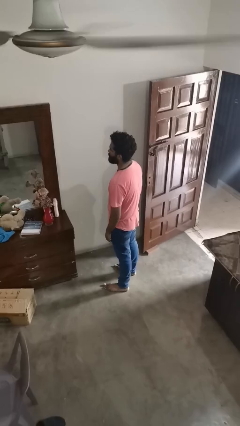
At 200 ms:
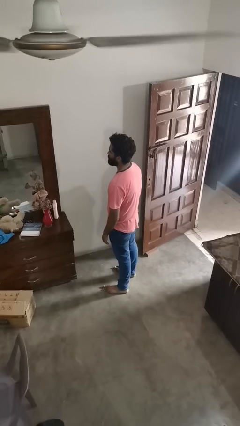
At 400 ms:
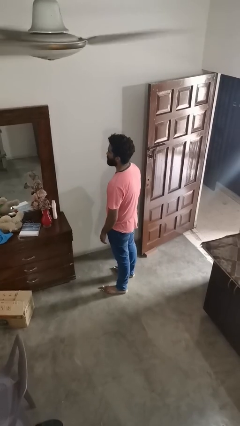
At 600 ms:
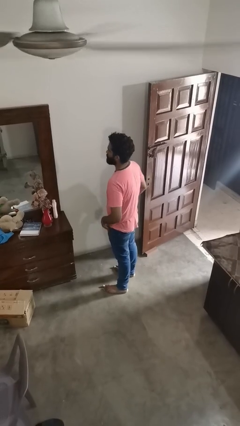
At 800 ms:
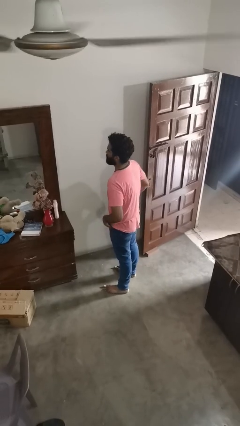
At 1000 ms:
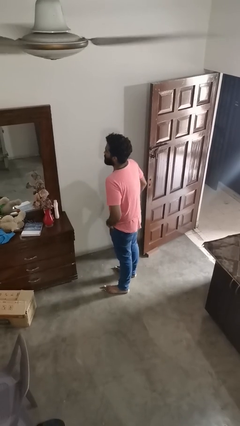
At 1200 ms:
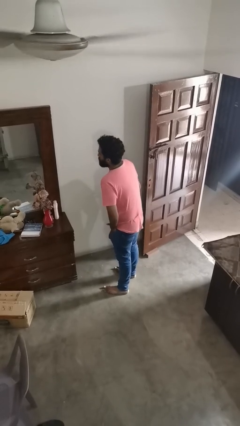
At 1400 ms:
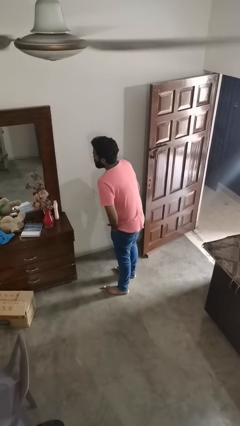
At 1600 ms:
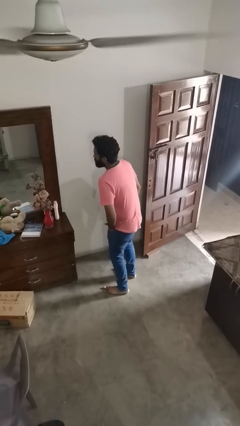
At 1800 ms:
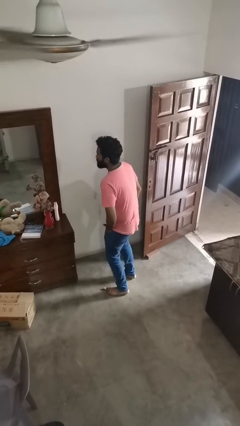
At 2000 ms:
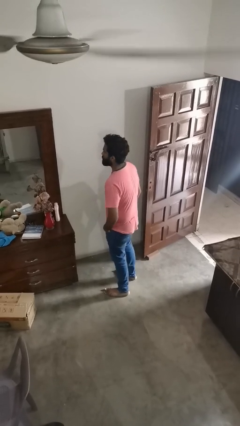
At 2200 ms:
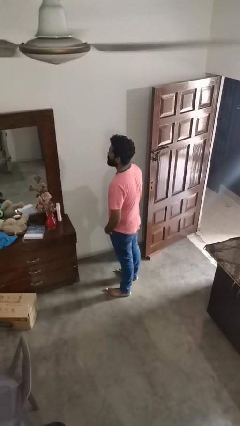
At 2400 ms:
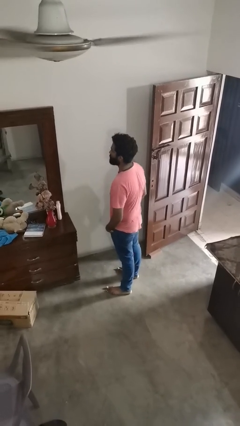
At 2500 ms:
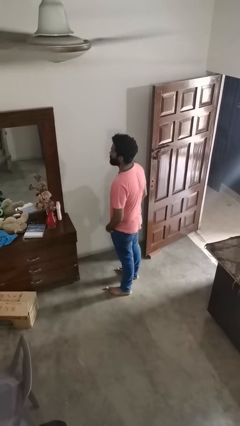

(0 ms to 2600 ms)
person puts hands in back pockets

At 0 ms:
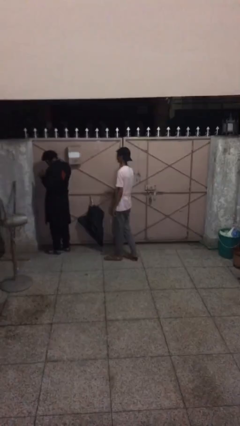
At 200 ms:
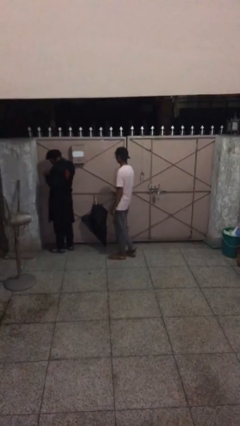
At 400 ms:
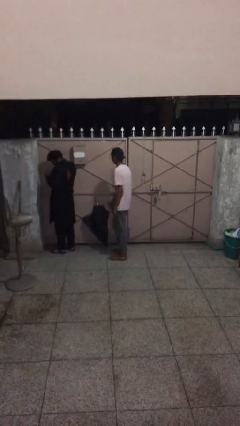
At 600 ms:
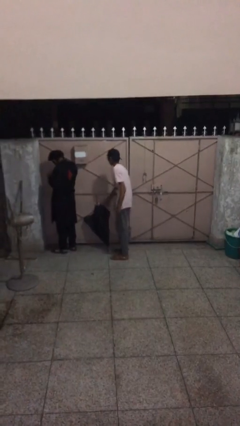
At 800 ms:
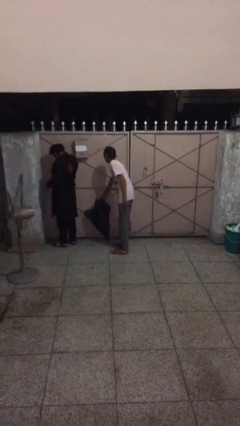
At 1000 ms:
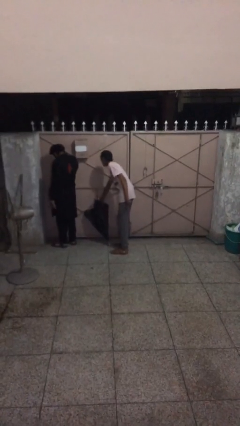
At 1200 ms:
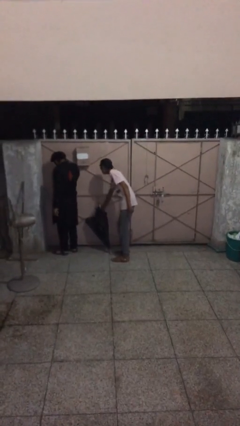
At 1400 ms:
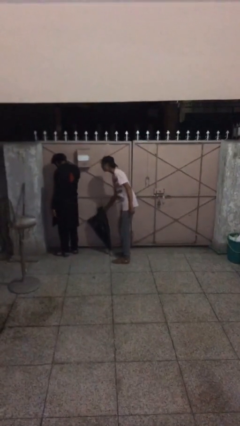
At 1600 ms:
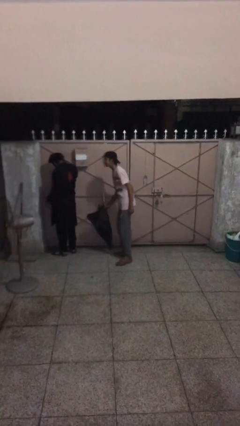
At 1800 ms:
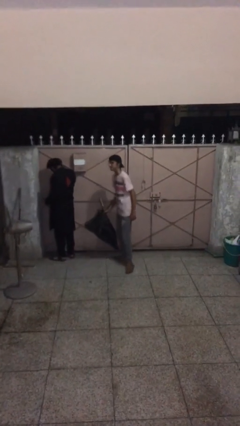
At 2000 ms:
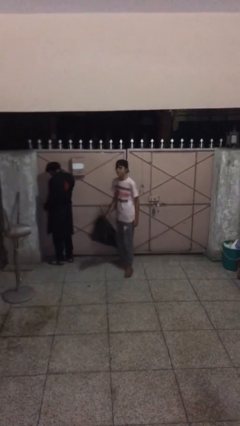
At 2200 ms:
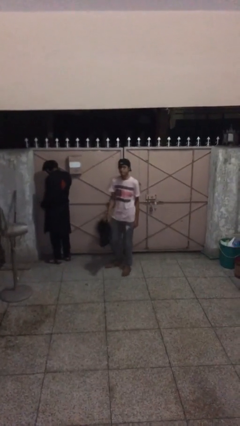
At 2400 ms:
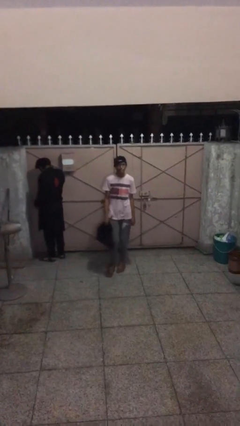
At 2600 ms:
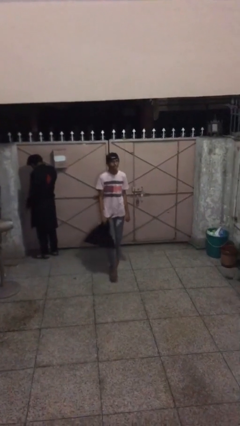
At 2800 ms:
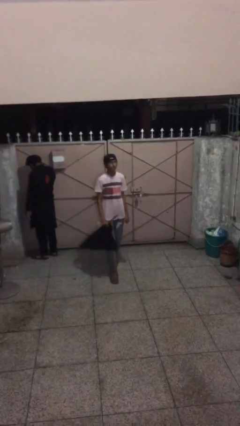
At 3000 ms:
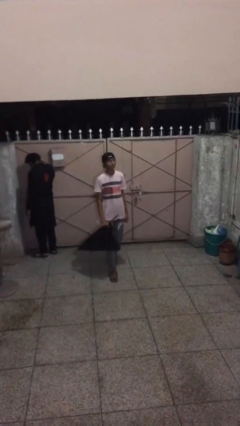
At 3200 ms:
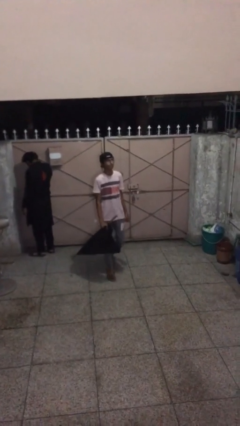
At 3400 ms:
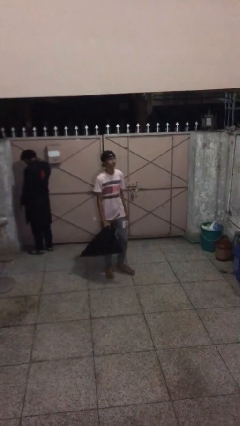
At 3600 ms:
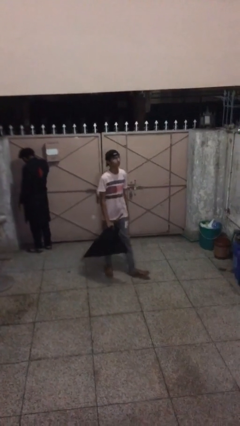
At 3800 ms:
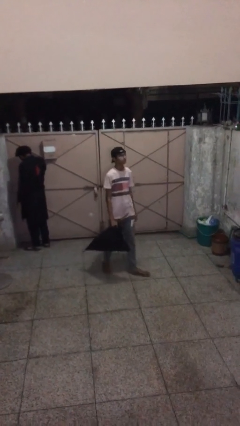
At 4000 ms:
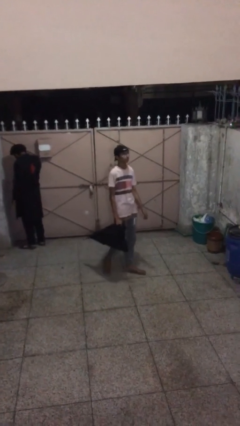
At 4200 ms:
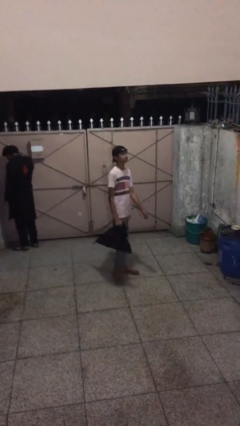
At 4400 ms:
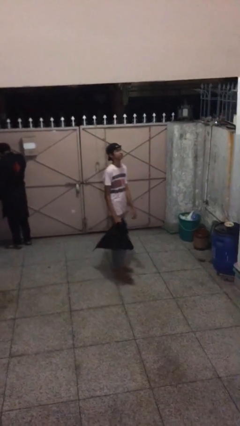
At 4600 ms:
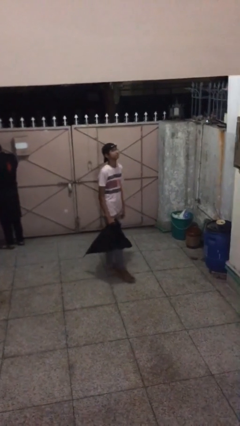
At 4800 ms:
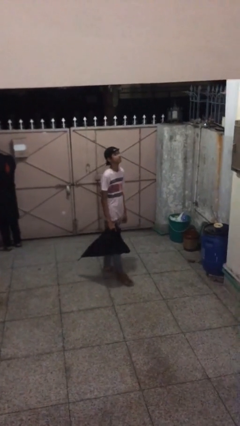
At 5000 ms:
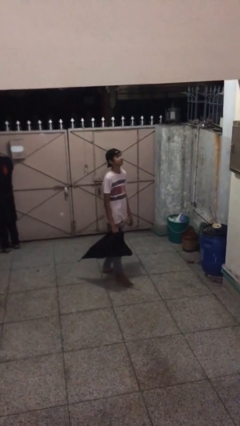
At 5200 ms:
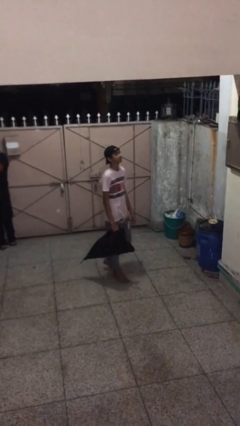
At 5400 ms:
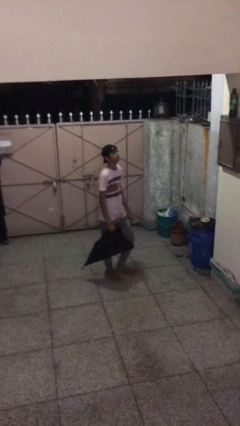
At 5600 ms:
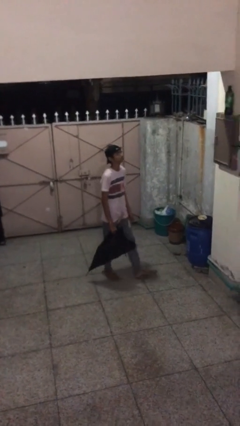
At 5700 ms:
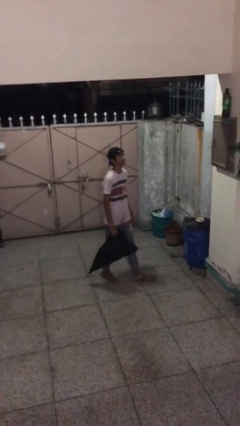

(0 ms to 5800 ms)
person steals object from person

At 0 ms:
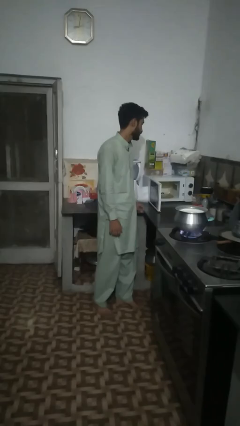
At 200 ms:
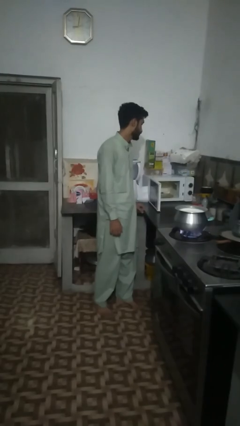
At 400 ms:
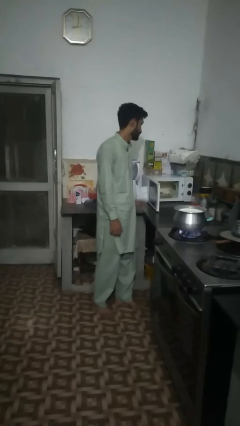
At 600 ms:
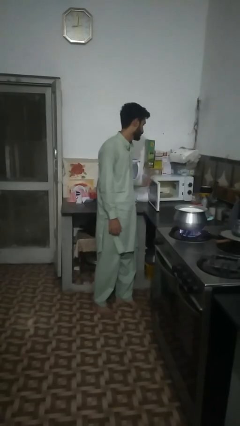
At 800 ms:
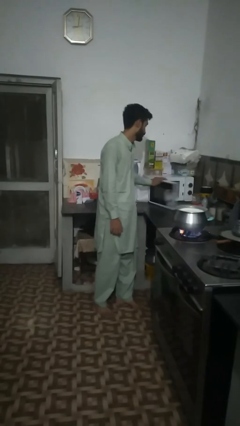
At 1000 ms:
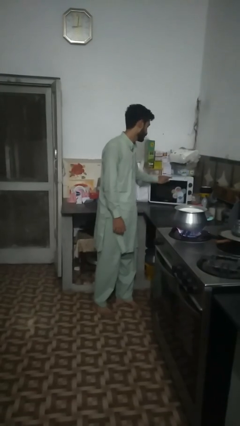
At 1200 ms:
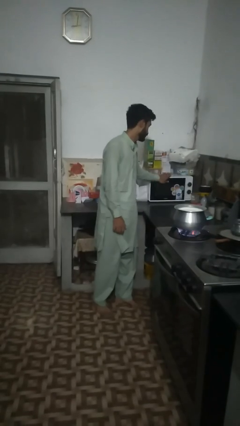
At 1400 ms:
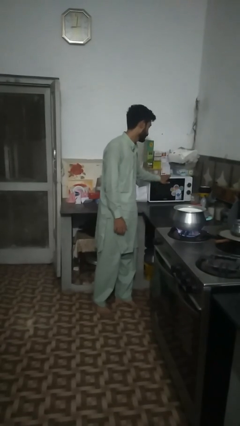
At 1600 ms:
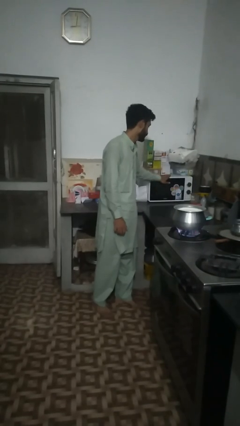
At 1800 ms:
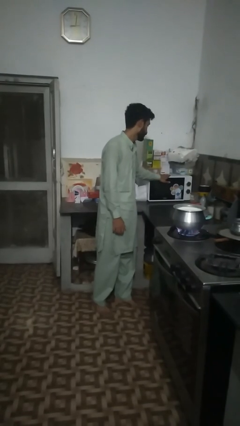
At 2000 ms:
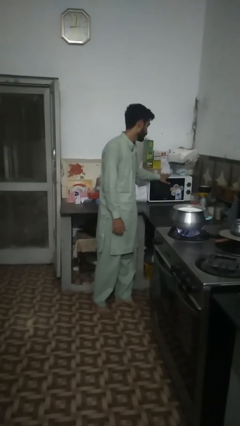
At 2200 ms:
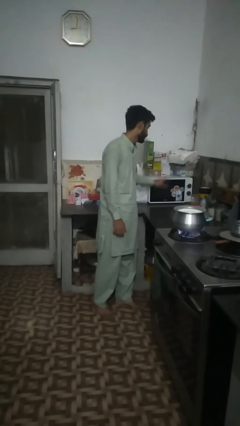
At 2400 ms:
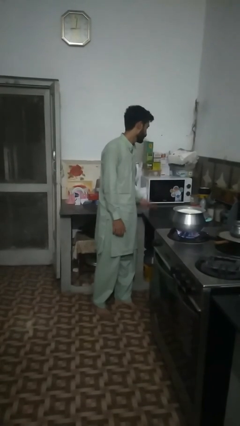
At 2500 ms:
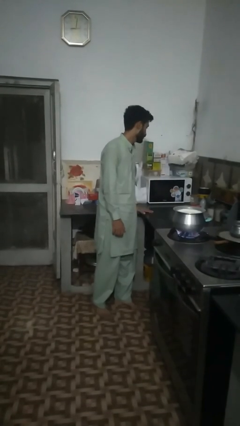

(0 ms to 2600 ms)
person closes microwave

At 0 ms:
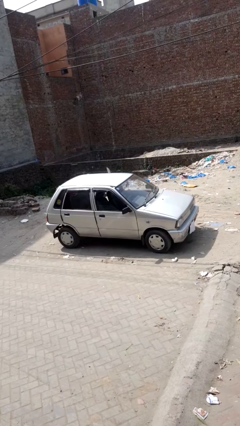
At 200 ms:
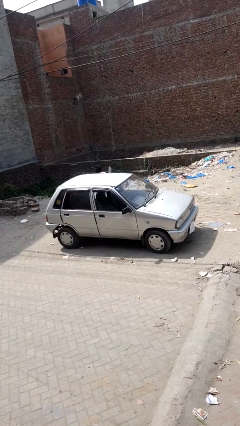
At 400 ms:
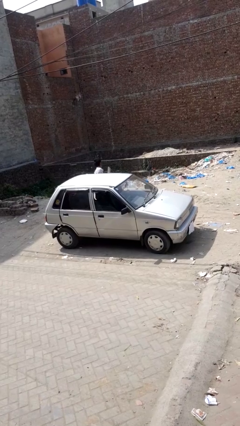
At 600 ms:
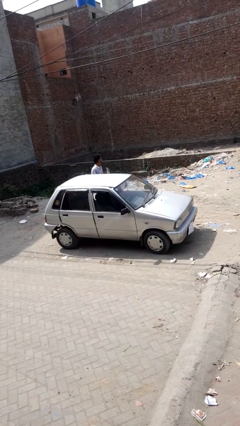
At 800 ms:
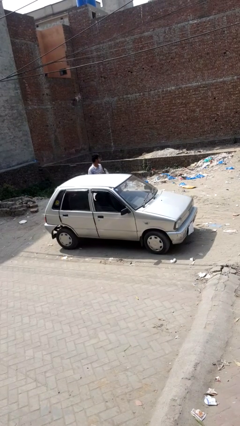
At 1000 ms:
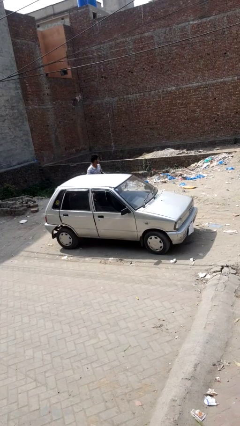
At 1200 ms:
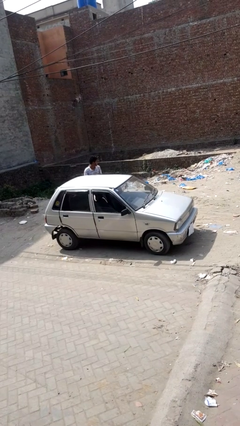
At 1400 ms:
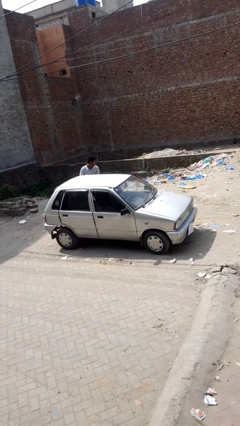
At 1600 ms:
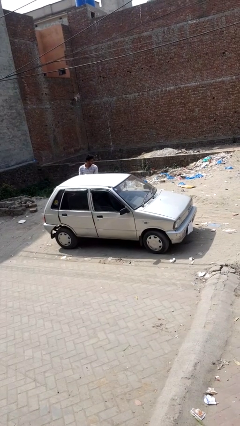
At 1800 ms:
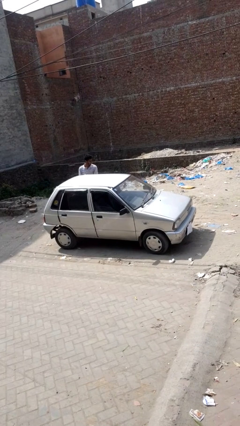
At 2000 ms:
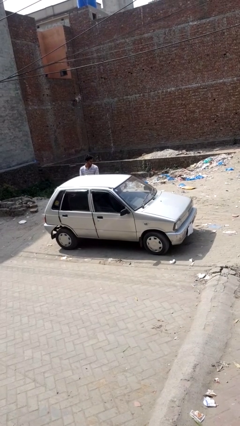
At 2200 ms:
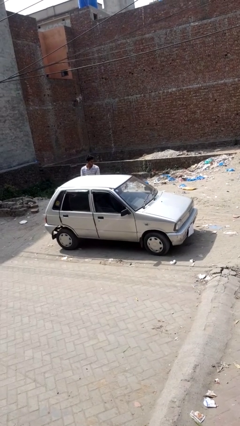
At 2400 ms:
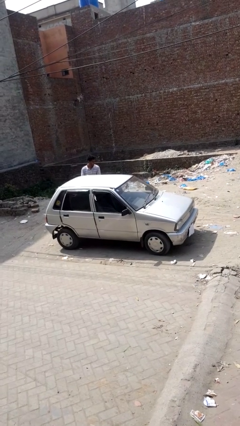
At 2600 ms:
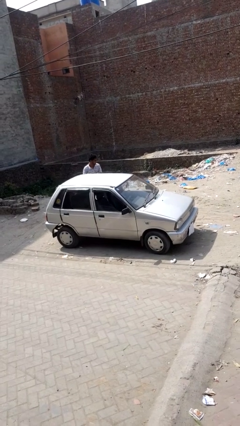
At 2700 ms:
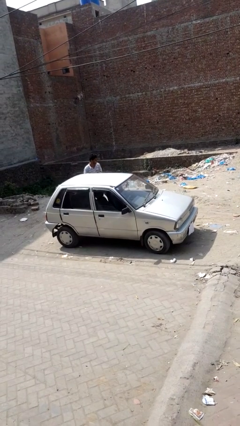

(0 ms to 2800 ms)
car drops off person

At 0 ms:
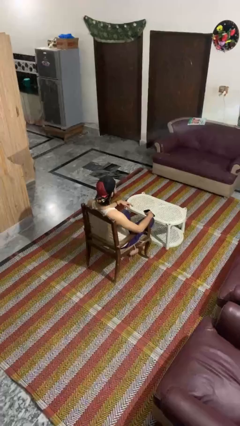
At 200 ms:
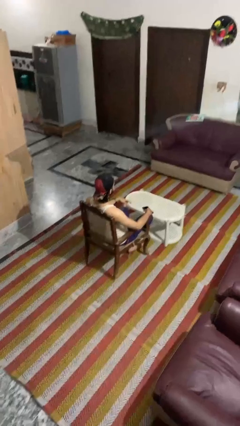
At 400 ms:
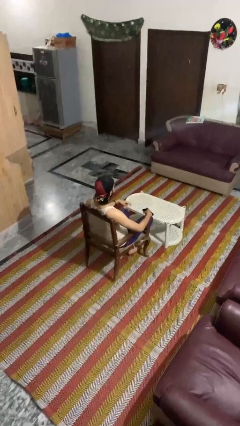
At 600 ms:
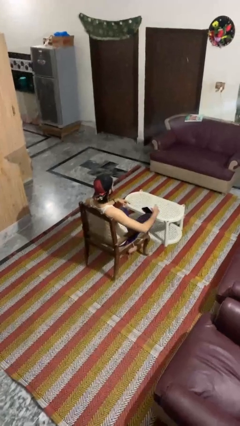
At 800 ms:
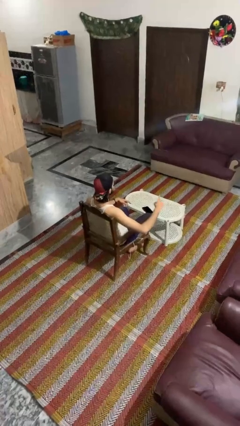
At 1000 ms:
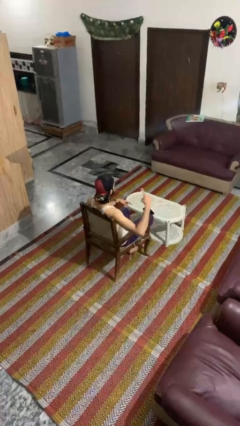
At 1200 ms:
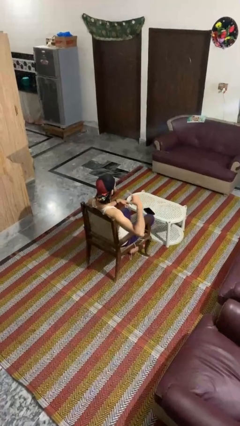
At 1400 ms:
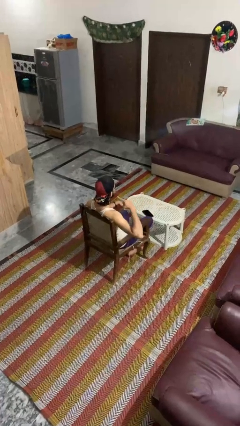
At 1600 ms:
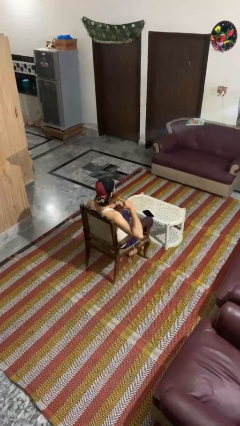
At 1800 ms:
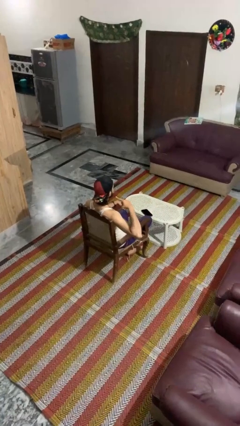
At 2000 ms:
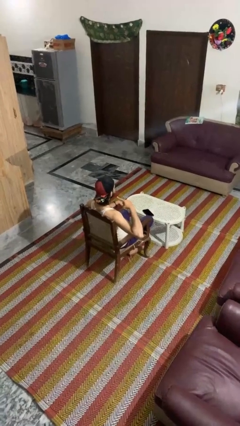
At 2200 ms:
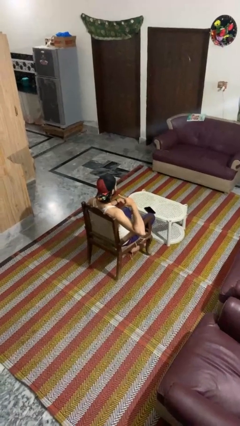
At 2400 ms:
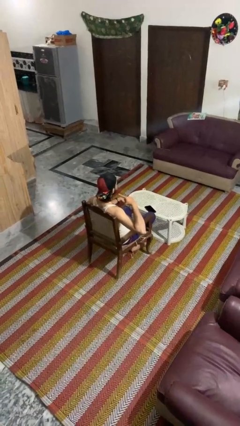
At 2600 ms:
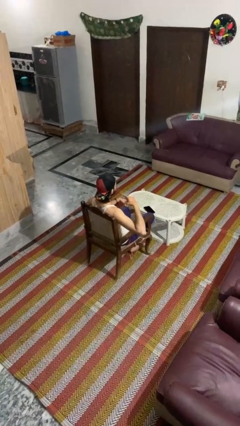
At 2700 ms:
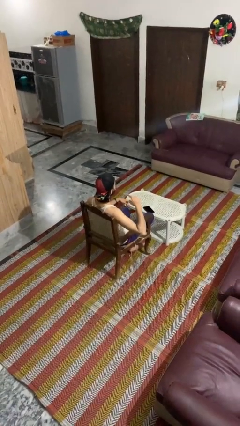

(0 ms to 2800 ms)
person gestures listen closely

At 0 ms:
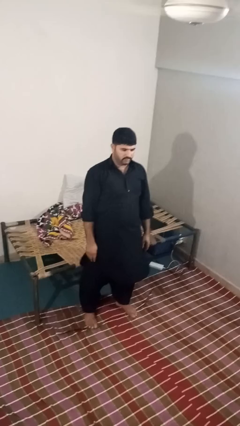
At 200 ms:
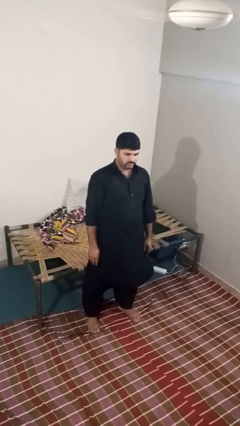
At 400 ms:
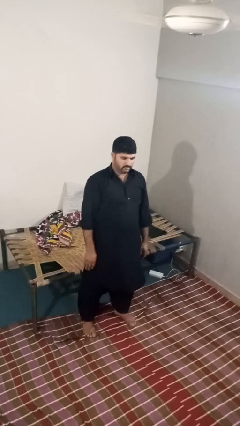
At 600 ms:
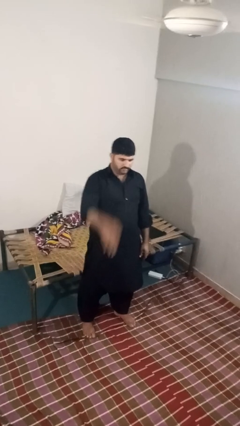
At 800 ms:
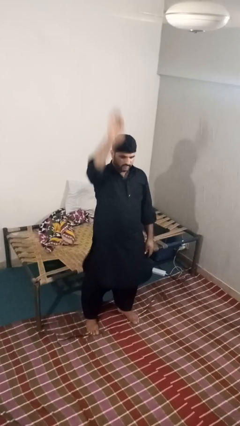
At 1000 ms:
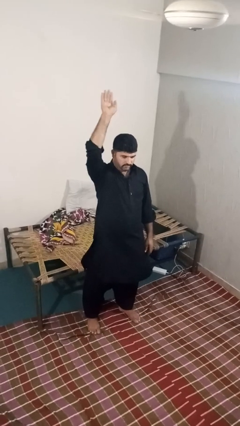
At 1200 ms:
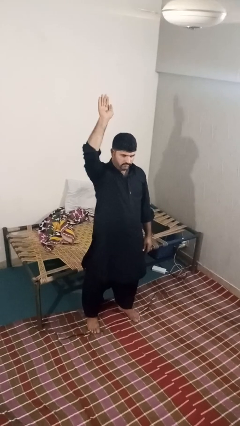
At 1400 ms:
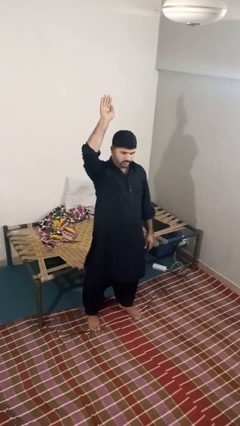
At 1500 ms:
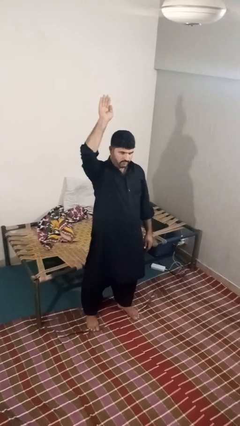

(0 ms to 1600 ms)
person gestures swipe up
